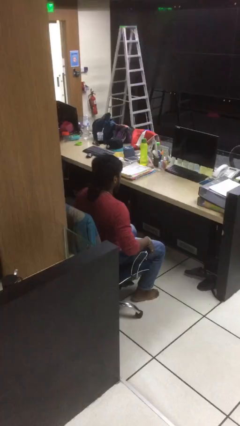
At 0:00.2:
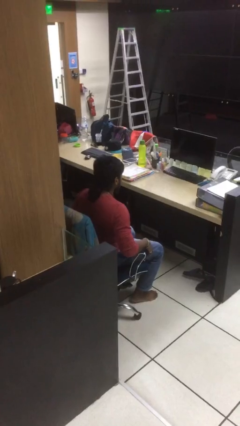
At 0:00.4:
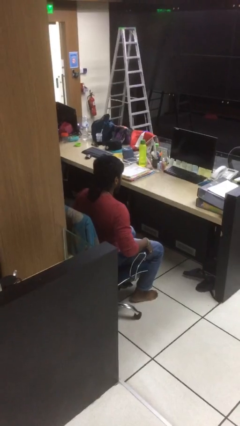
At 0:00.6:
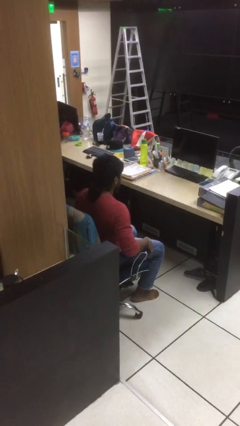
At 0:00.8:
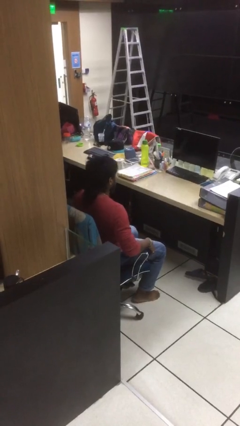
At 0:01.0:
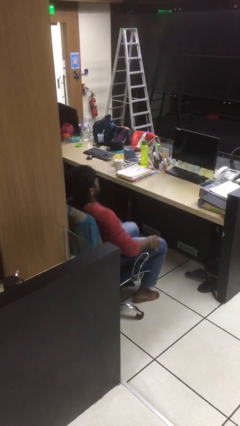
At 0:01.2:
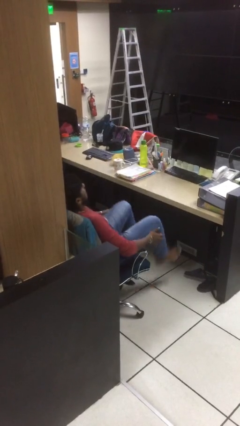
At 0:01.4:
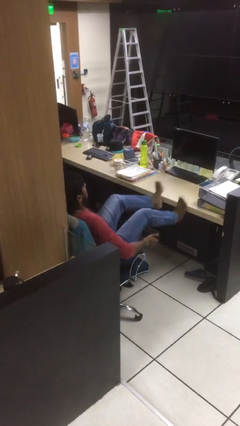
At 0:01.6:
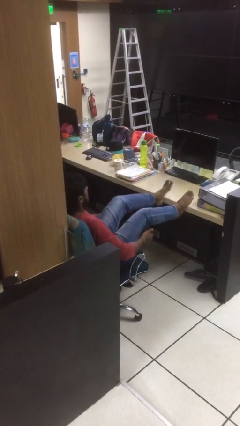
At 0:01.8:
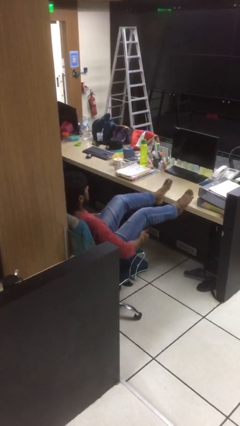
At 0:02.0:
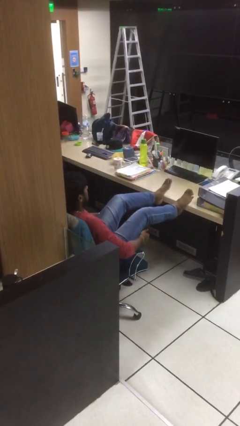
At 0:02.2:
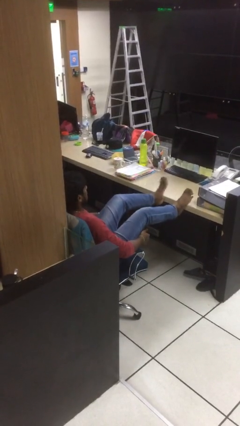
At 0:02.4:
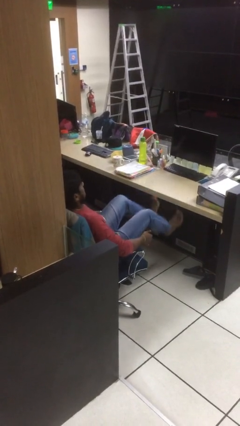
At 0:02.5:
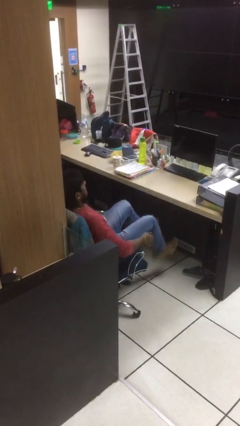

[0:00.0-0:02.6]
person puts feet up

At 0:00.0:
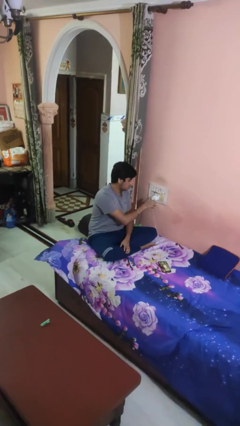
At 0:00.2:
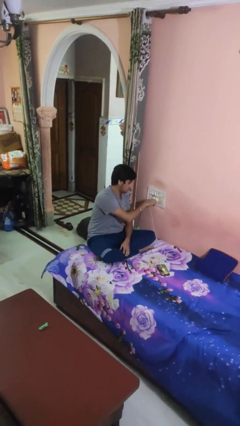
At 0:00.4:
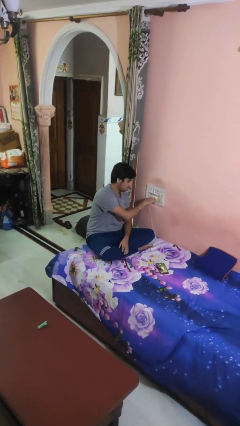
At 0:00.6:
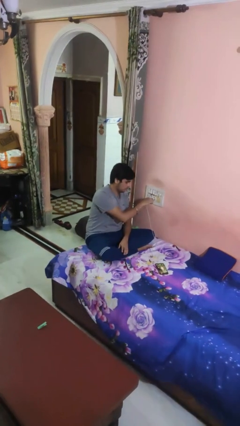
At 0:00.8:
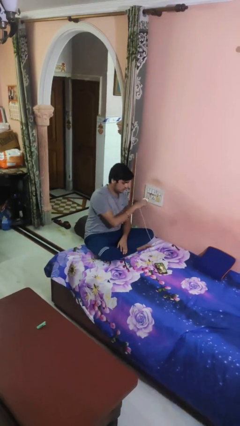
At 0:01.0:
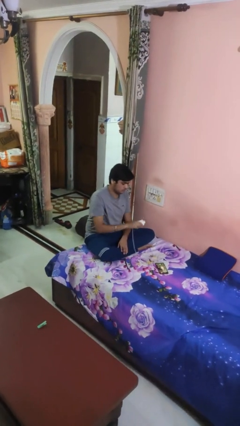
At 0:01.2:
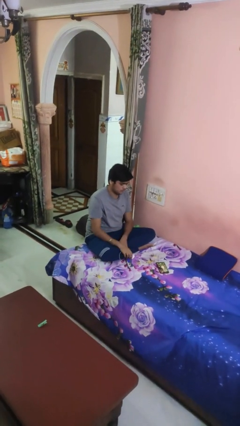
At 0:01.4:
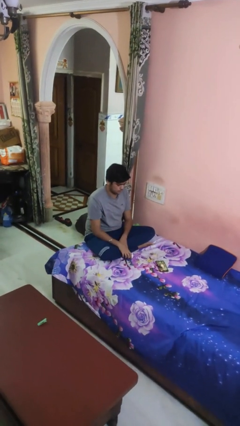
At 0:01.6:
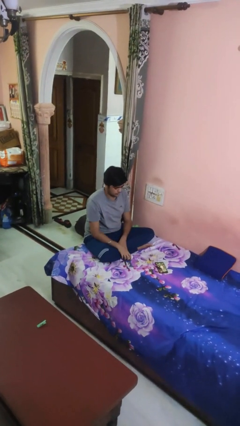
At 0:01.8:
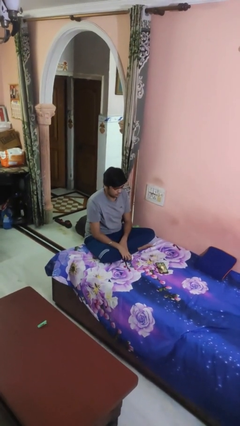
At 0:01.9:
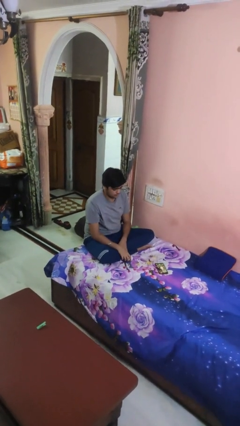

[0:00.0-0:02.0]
person unplugs from electrical socket

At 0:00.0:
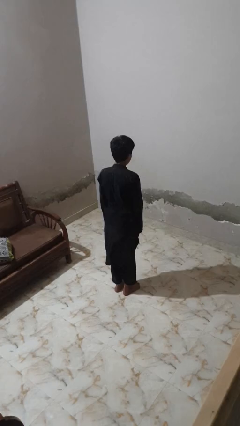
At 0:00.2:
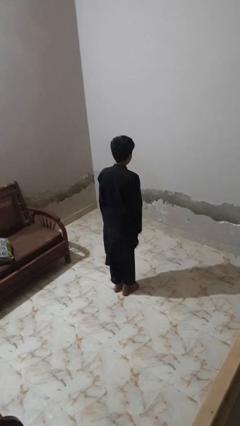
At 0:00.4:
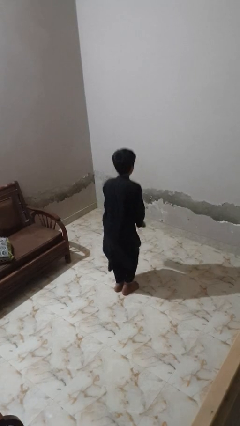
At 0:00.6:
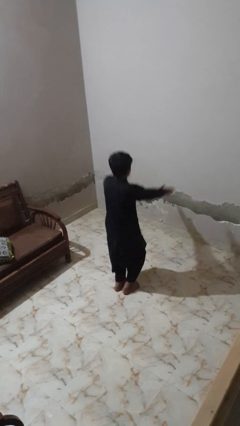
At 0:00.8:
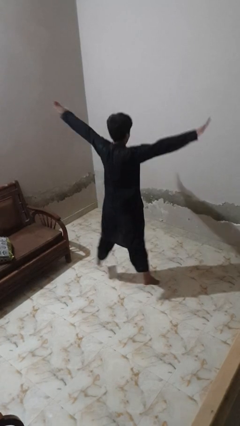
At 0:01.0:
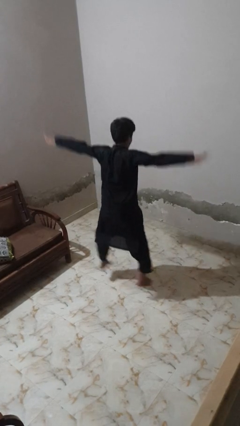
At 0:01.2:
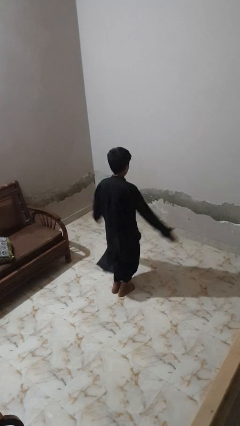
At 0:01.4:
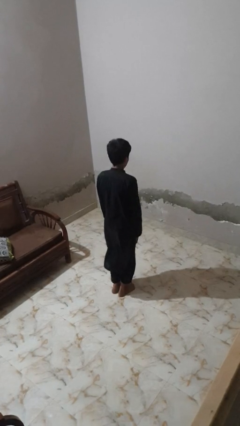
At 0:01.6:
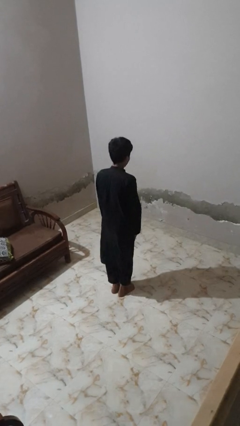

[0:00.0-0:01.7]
person exercises with jumping jacks

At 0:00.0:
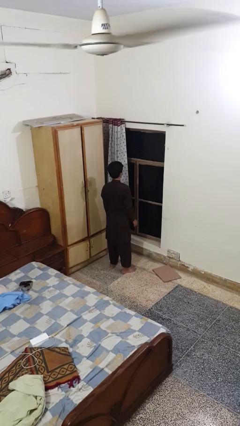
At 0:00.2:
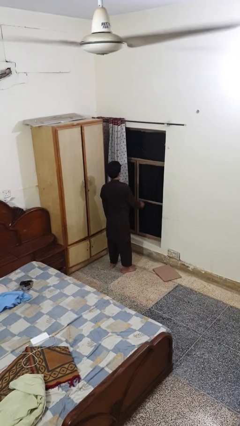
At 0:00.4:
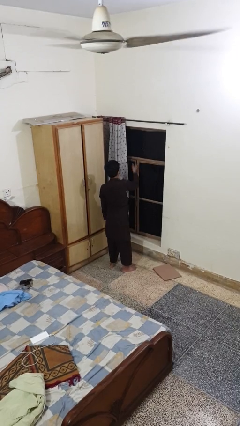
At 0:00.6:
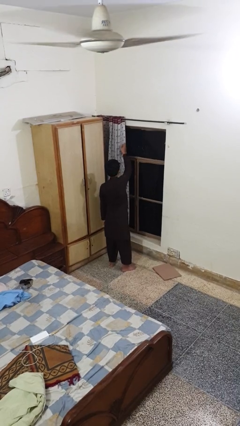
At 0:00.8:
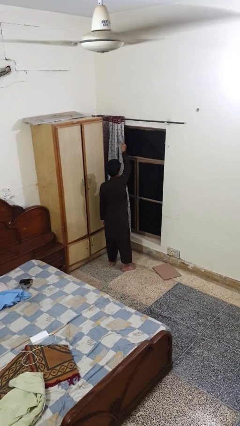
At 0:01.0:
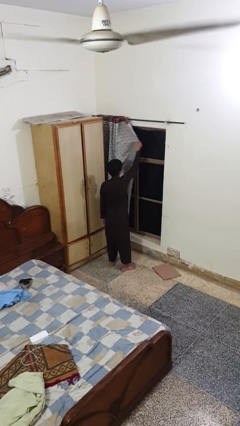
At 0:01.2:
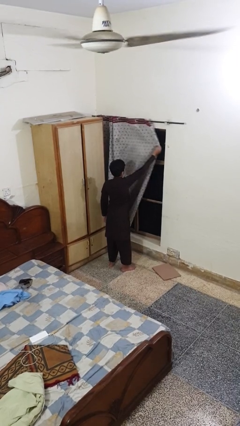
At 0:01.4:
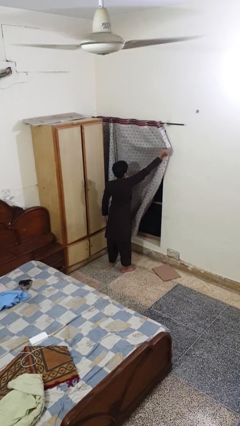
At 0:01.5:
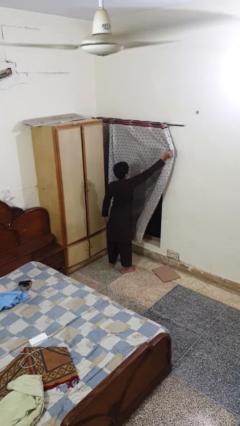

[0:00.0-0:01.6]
person closes curtains

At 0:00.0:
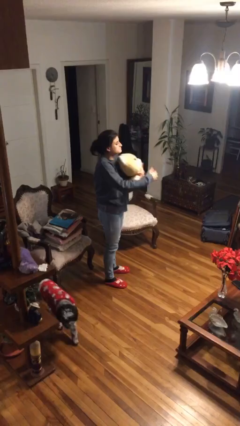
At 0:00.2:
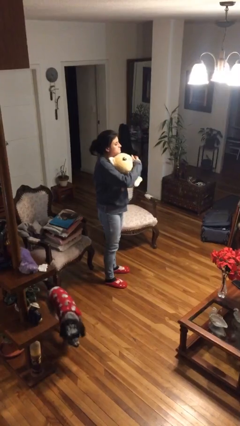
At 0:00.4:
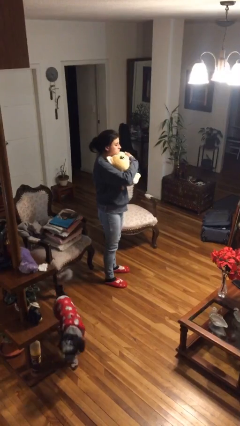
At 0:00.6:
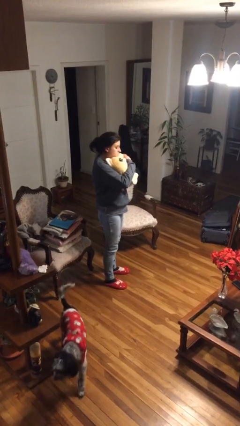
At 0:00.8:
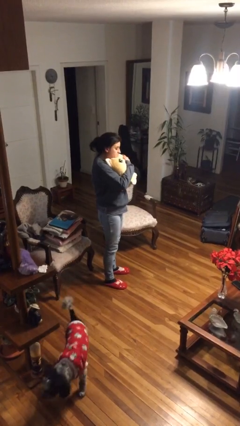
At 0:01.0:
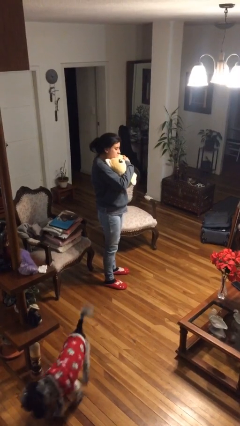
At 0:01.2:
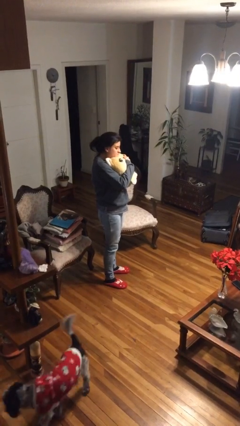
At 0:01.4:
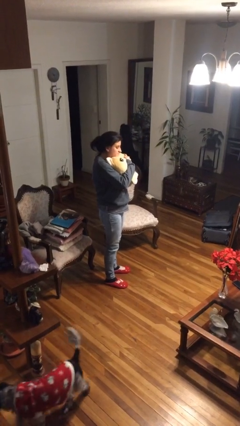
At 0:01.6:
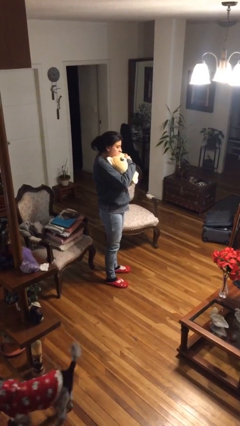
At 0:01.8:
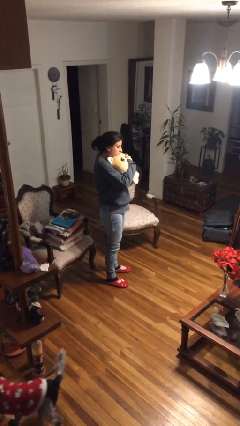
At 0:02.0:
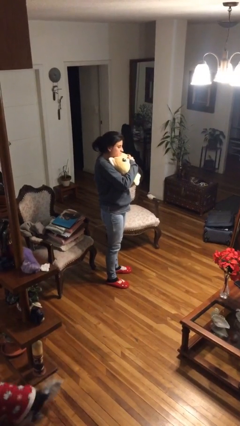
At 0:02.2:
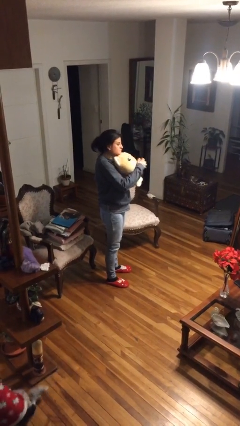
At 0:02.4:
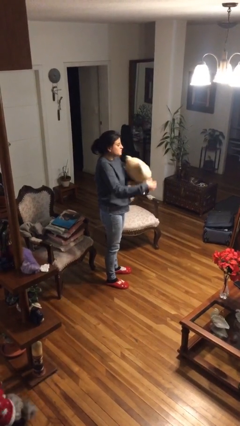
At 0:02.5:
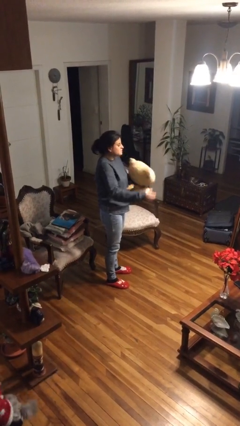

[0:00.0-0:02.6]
person hugs stuffed animal

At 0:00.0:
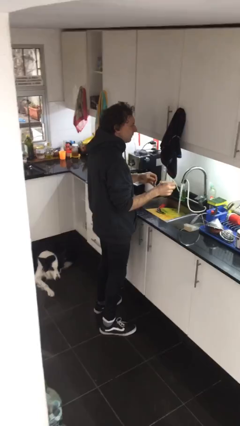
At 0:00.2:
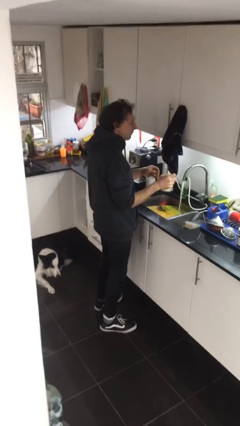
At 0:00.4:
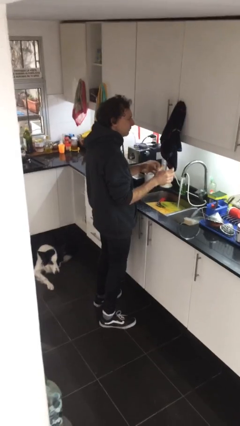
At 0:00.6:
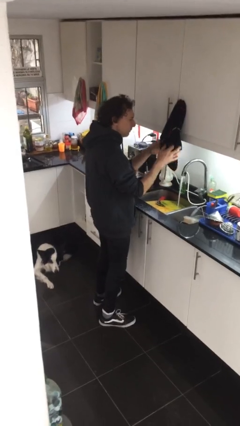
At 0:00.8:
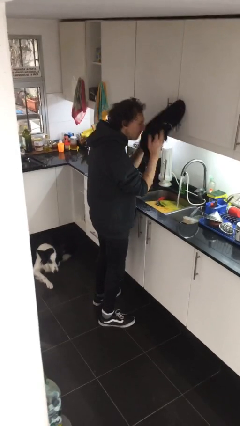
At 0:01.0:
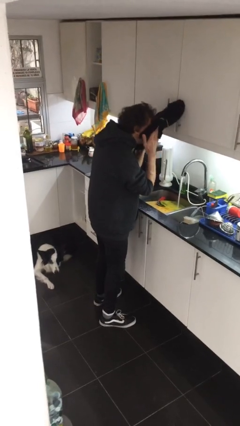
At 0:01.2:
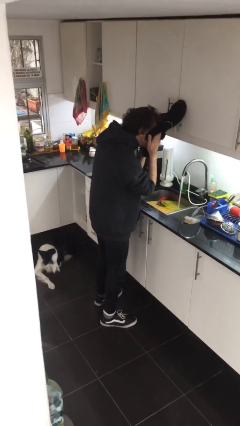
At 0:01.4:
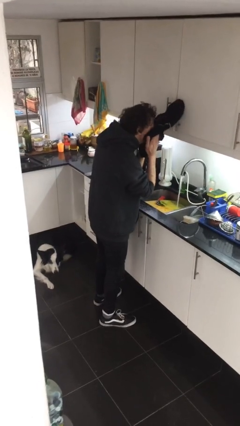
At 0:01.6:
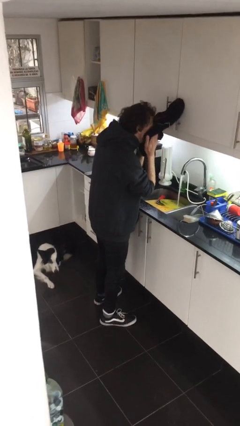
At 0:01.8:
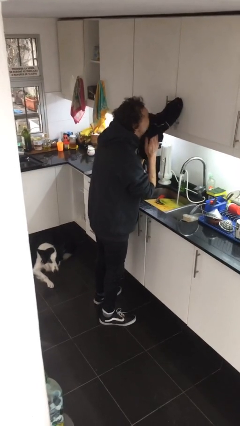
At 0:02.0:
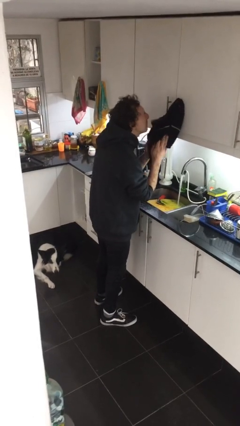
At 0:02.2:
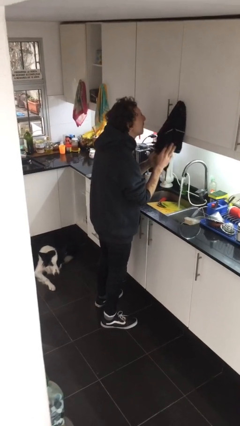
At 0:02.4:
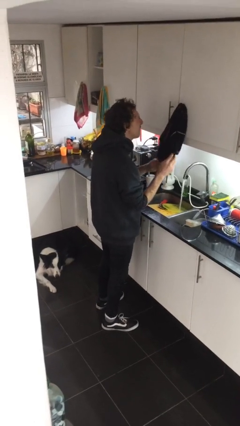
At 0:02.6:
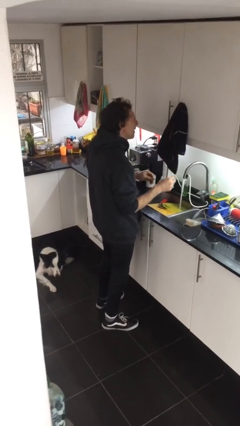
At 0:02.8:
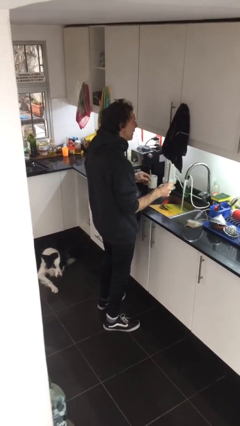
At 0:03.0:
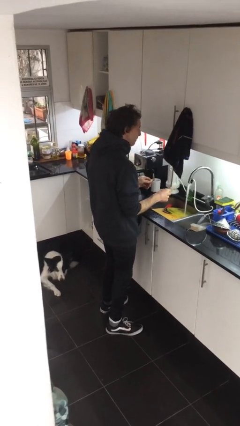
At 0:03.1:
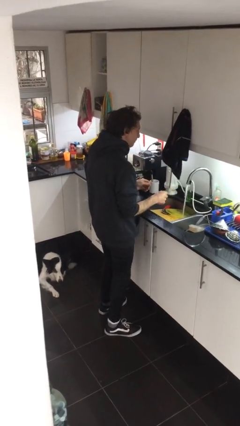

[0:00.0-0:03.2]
person dries face with towel

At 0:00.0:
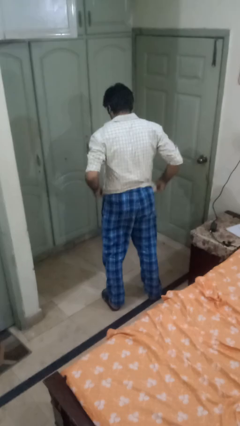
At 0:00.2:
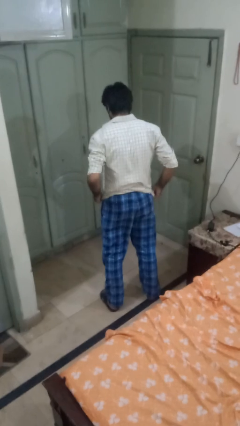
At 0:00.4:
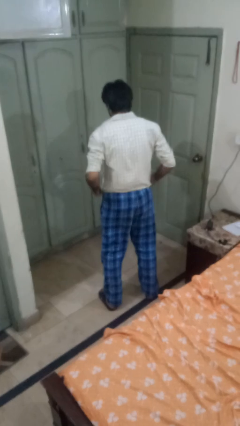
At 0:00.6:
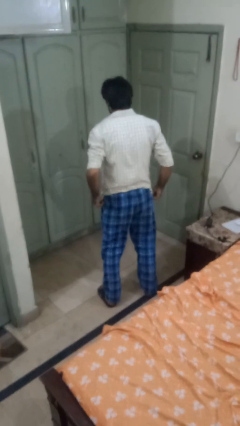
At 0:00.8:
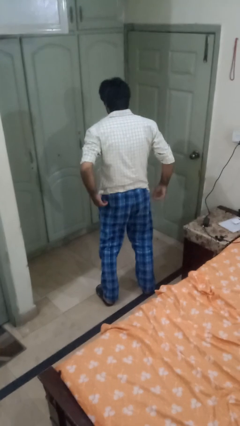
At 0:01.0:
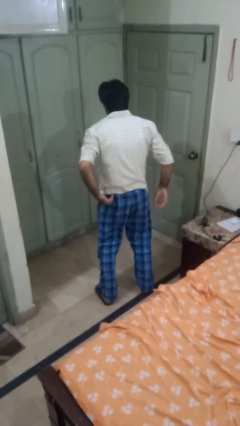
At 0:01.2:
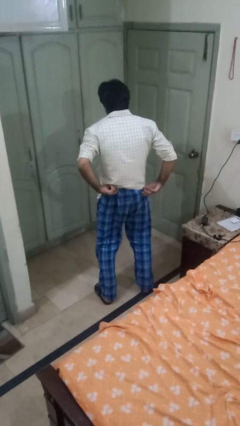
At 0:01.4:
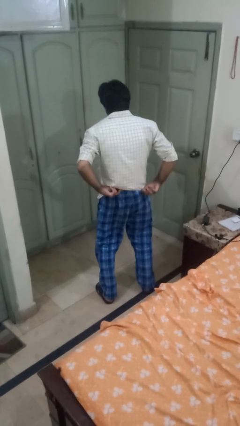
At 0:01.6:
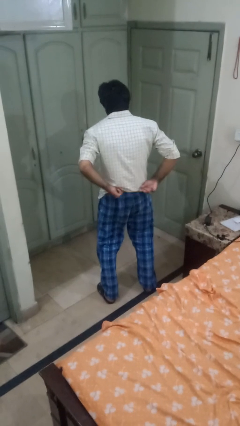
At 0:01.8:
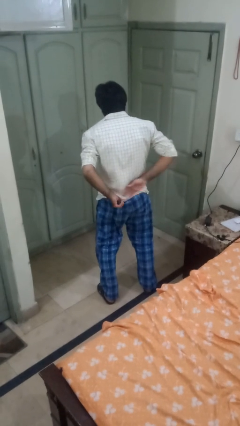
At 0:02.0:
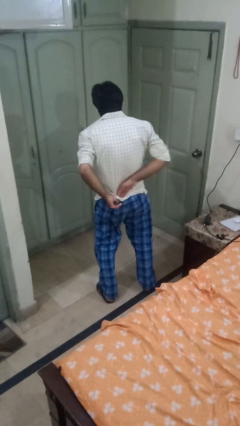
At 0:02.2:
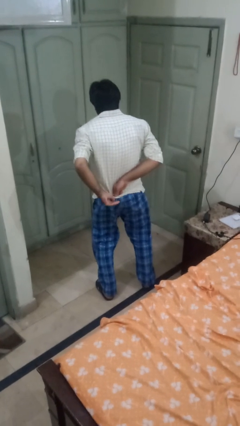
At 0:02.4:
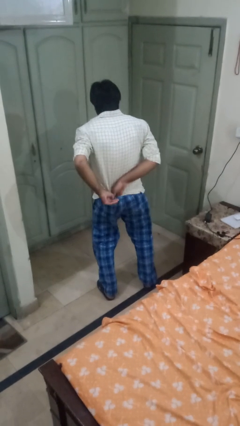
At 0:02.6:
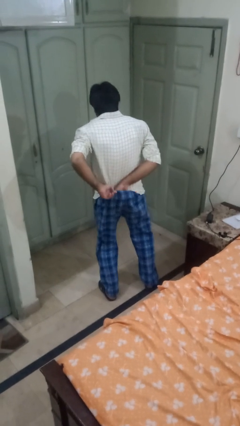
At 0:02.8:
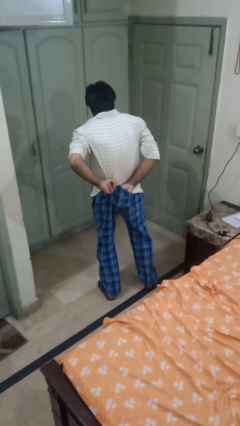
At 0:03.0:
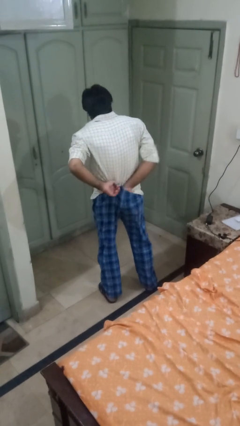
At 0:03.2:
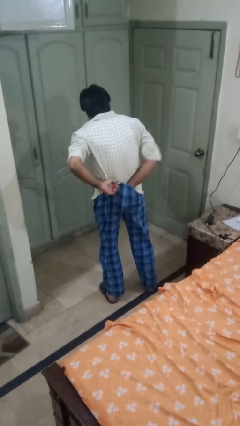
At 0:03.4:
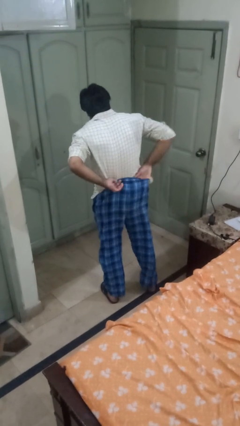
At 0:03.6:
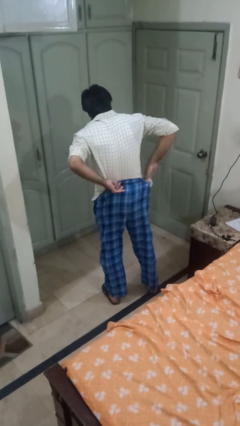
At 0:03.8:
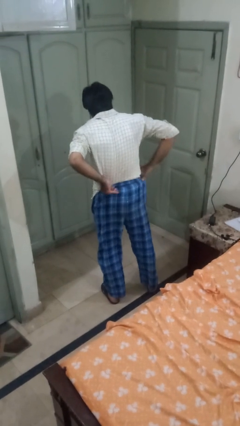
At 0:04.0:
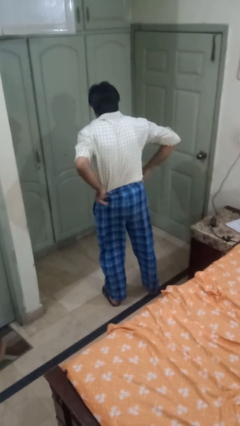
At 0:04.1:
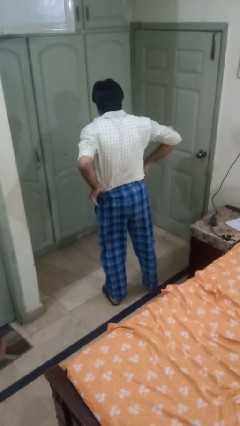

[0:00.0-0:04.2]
person tucks in shirt
